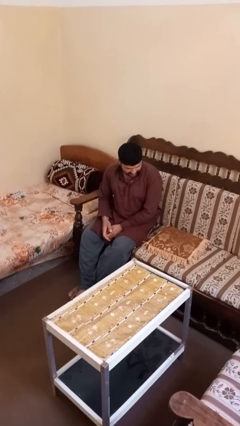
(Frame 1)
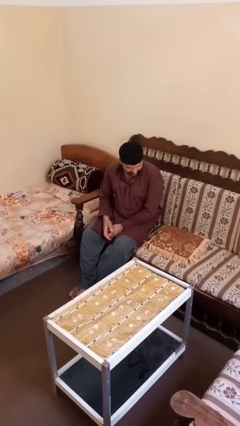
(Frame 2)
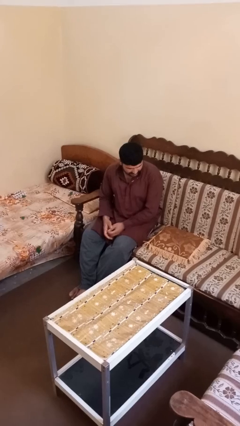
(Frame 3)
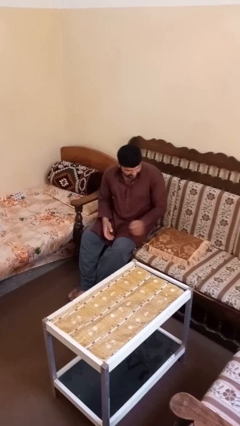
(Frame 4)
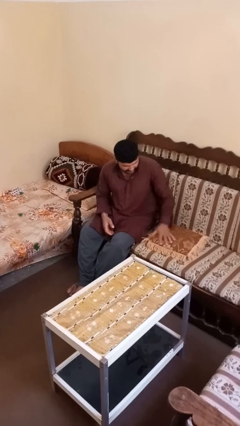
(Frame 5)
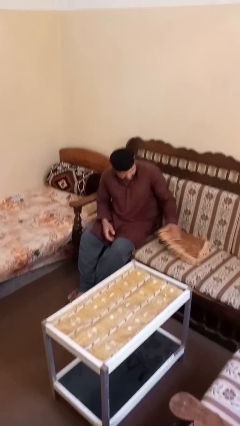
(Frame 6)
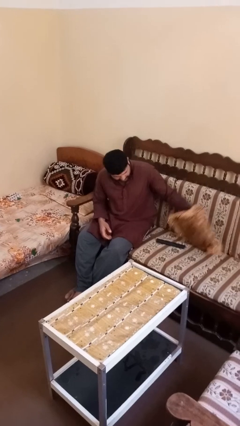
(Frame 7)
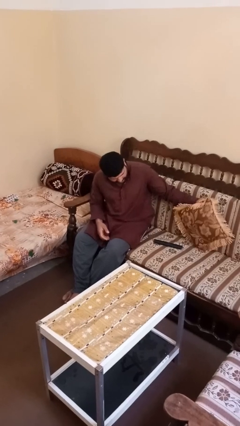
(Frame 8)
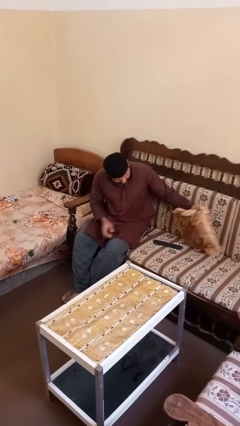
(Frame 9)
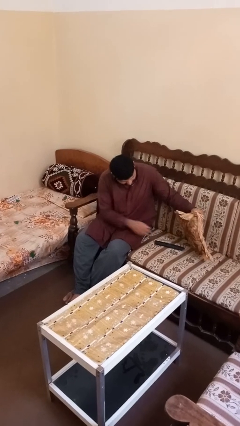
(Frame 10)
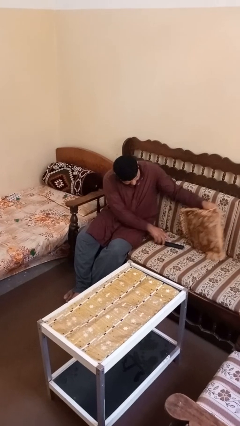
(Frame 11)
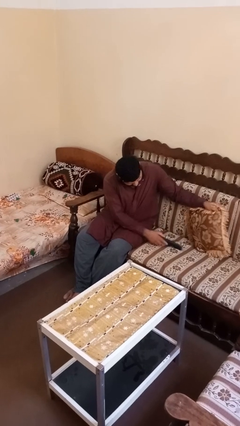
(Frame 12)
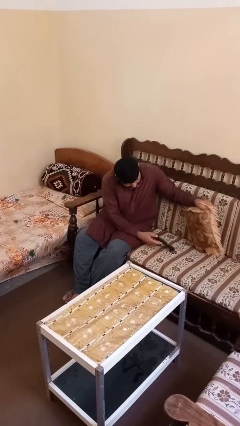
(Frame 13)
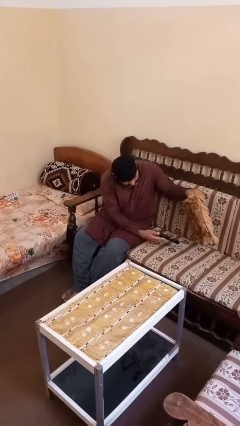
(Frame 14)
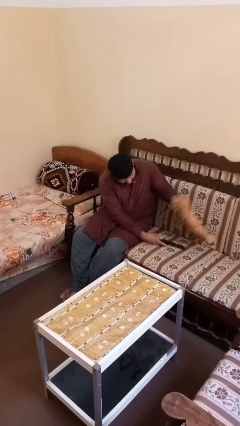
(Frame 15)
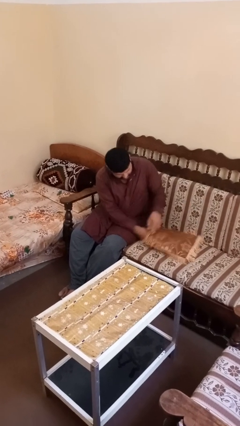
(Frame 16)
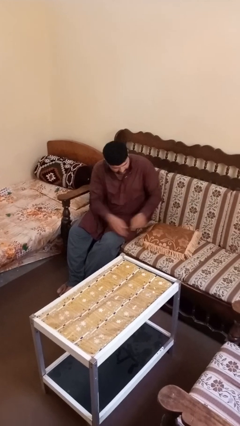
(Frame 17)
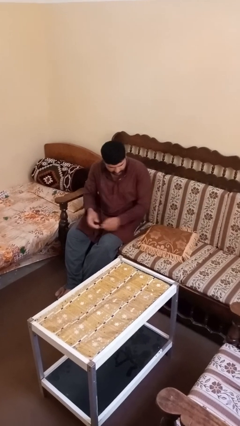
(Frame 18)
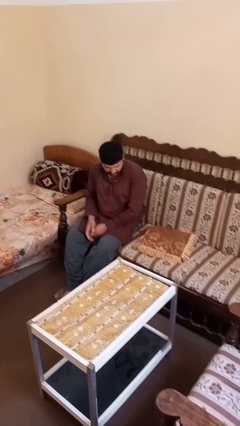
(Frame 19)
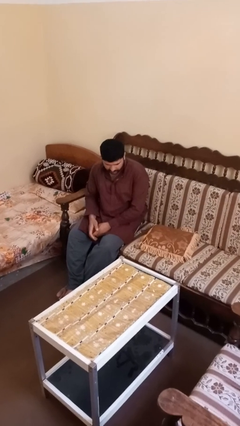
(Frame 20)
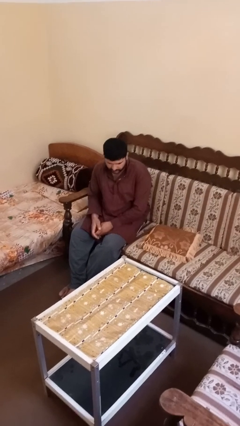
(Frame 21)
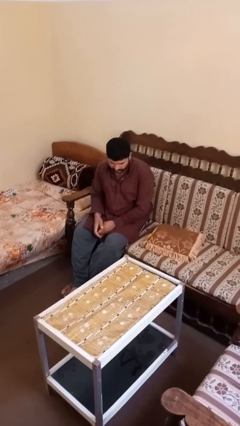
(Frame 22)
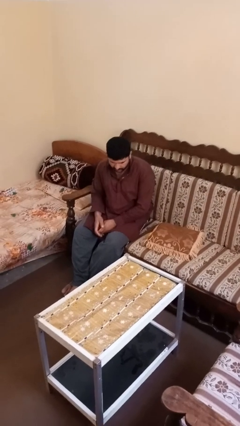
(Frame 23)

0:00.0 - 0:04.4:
person searches in couch

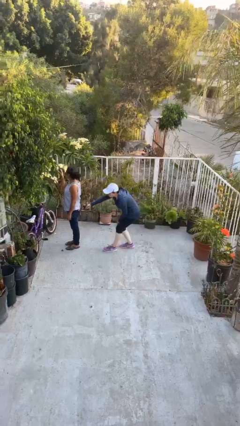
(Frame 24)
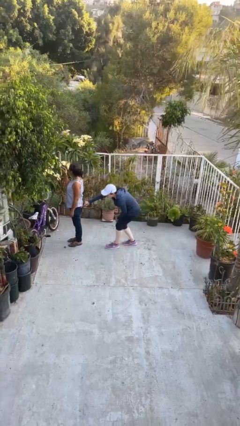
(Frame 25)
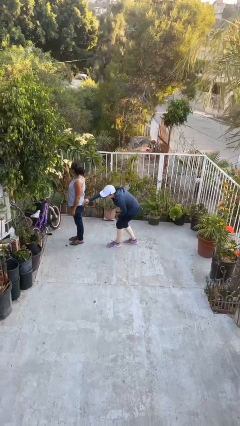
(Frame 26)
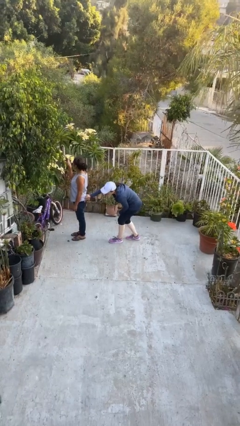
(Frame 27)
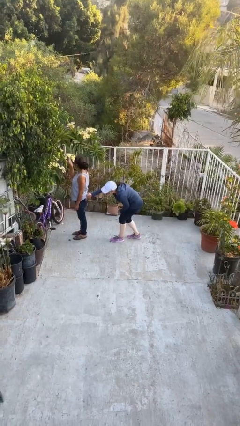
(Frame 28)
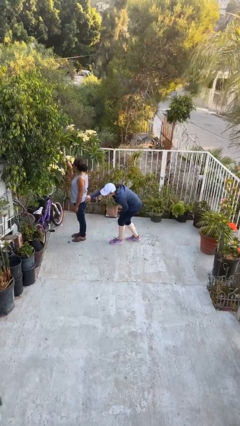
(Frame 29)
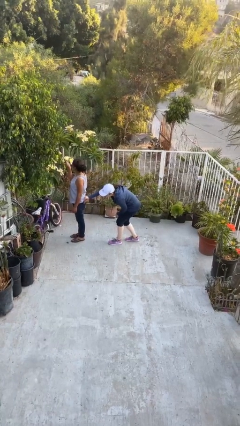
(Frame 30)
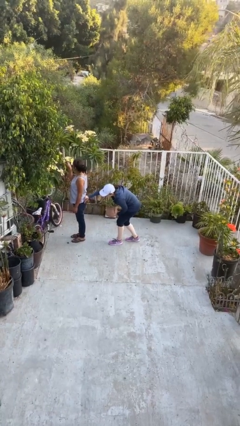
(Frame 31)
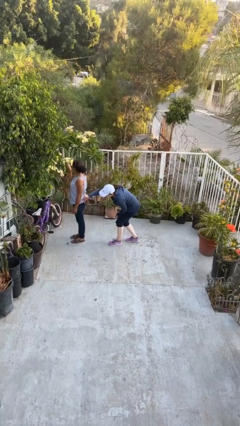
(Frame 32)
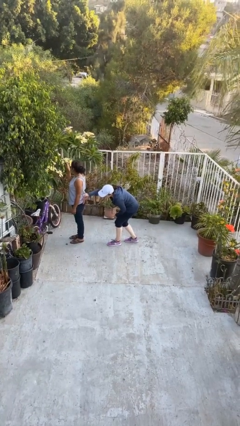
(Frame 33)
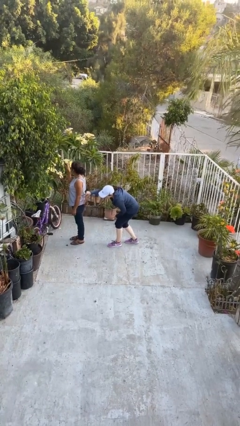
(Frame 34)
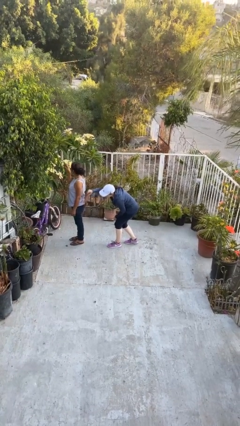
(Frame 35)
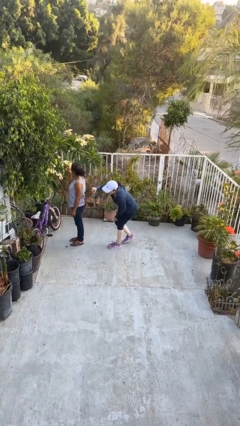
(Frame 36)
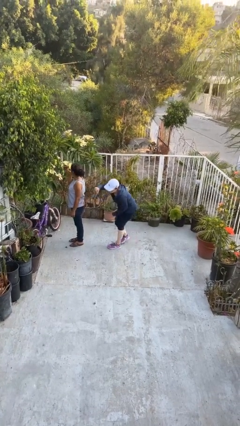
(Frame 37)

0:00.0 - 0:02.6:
person steals object from person

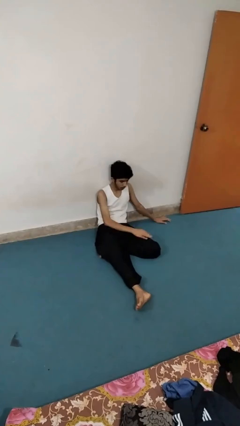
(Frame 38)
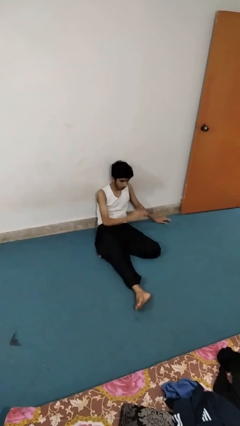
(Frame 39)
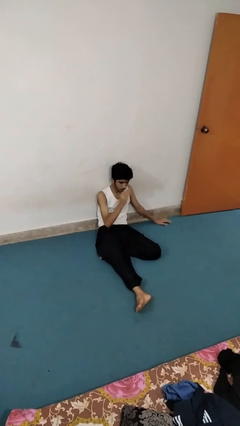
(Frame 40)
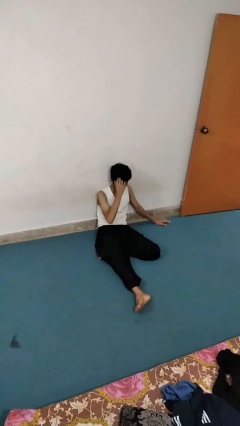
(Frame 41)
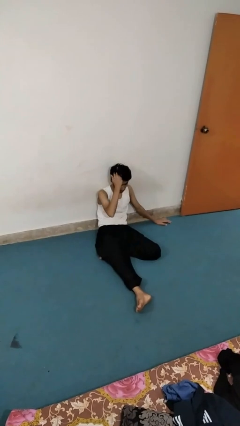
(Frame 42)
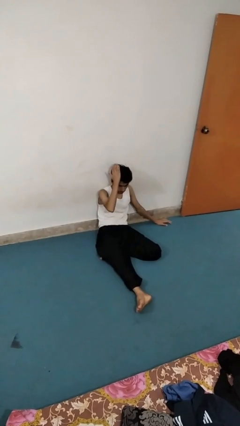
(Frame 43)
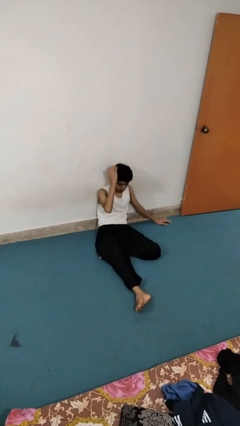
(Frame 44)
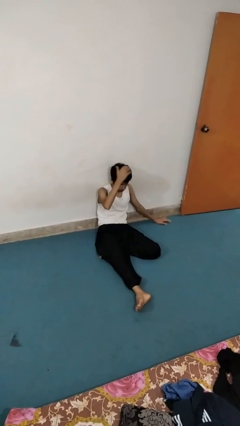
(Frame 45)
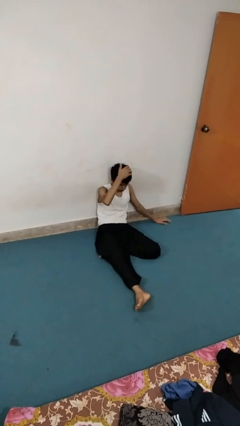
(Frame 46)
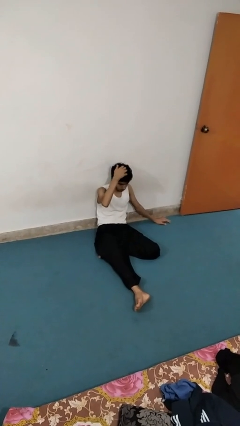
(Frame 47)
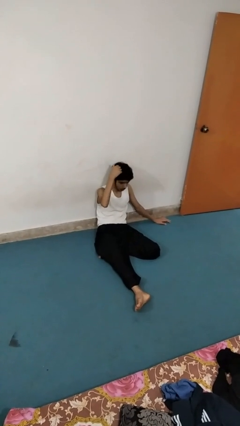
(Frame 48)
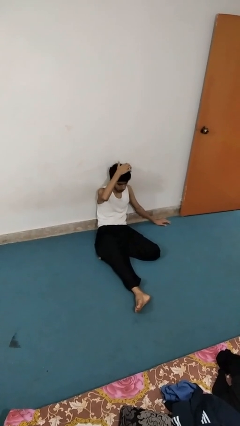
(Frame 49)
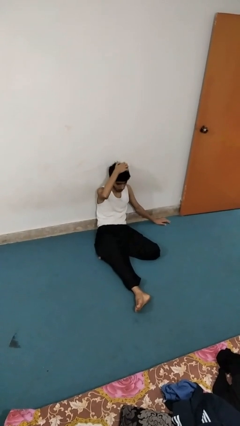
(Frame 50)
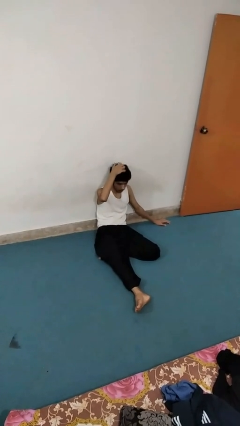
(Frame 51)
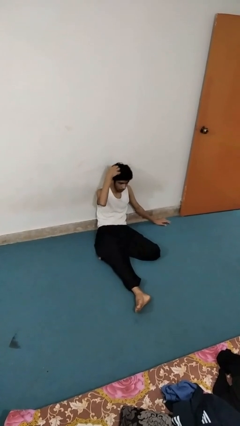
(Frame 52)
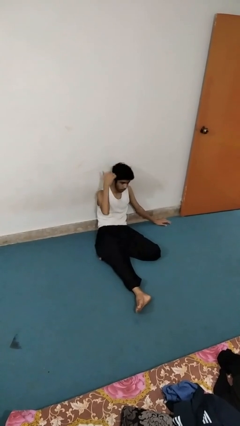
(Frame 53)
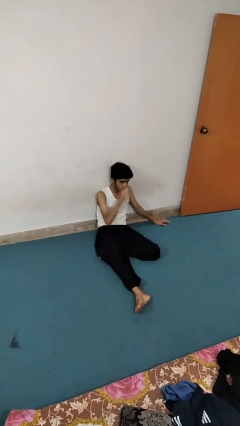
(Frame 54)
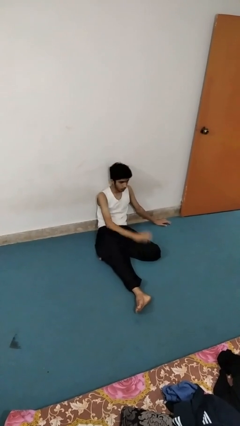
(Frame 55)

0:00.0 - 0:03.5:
person strokes hair

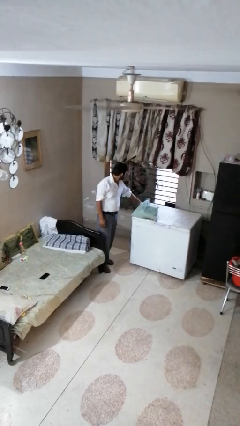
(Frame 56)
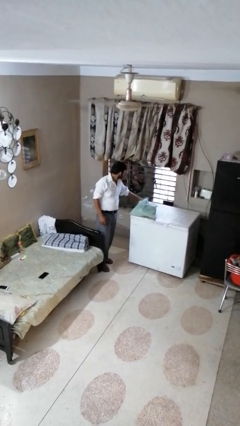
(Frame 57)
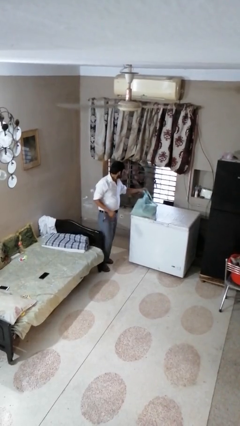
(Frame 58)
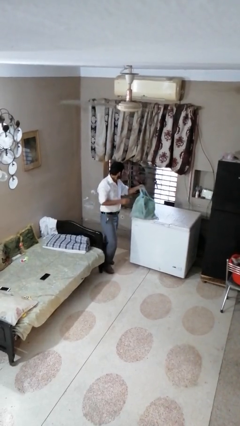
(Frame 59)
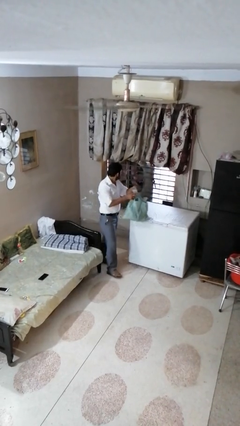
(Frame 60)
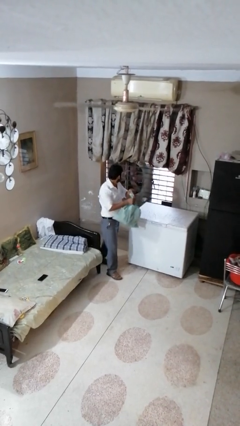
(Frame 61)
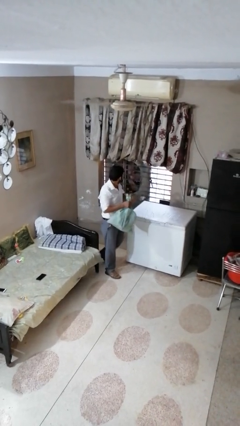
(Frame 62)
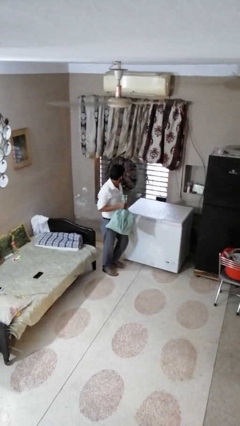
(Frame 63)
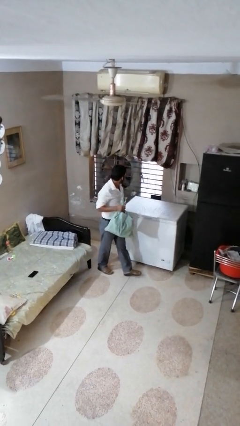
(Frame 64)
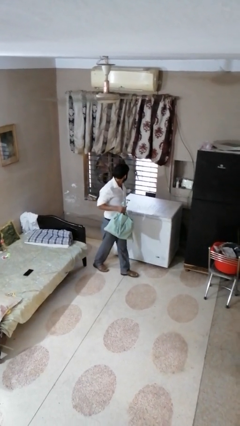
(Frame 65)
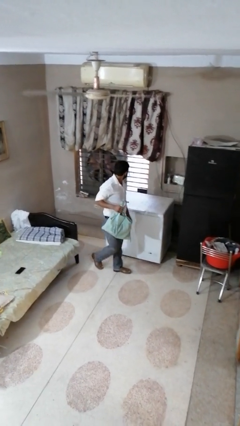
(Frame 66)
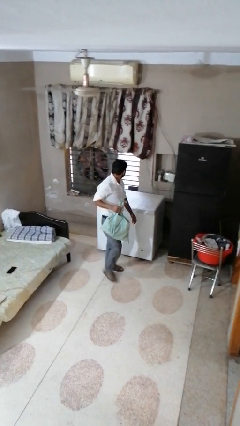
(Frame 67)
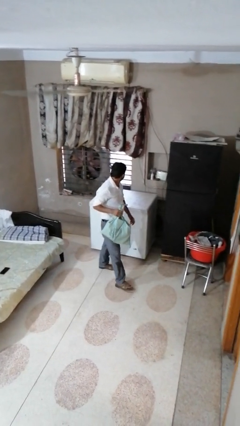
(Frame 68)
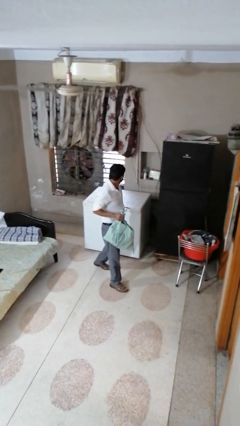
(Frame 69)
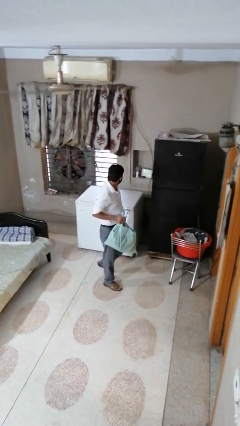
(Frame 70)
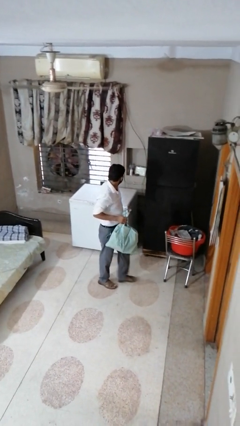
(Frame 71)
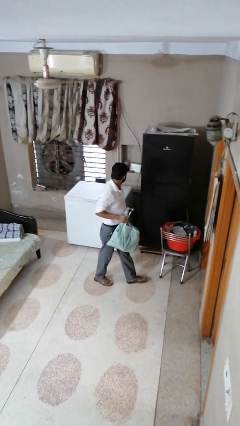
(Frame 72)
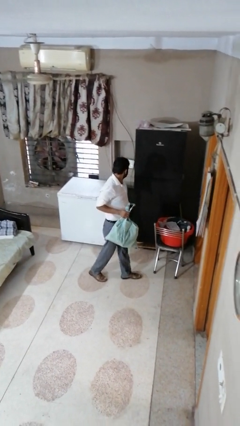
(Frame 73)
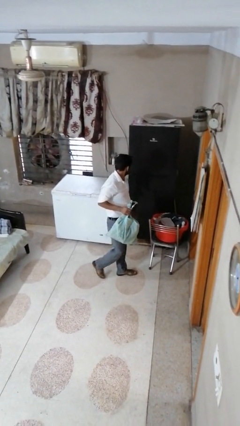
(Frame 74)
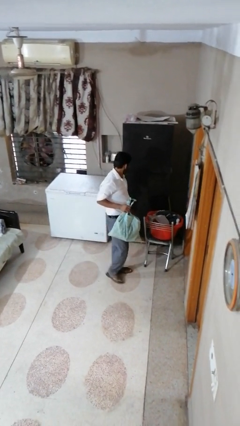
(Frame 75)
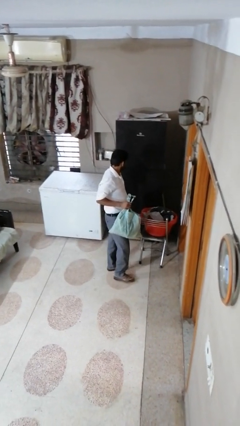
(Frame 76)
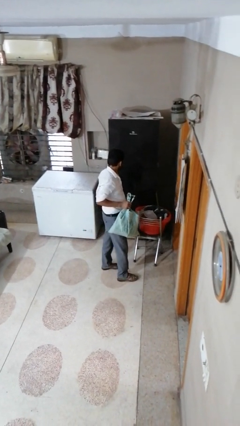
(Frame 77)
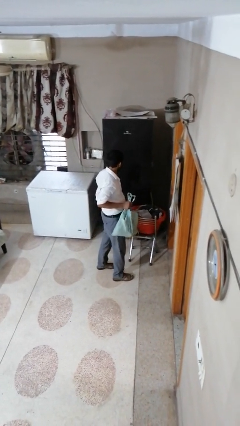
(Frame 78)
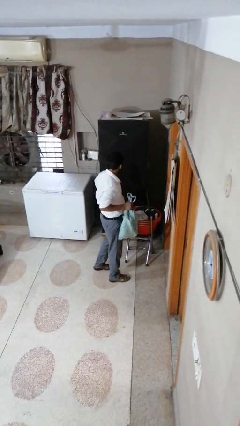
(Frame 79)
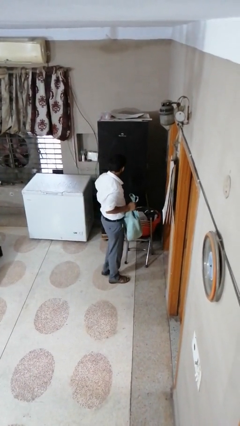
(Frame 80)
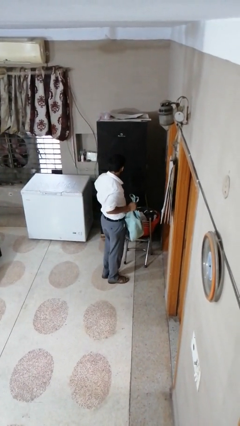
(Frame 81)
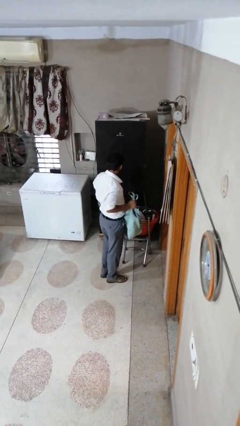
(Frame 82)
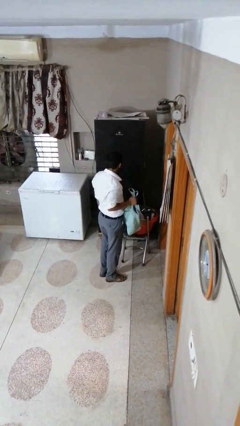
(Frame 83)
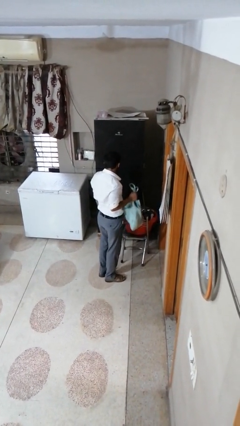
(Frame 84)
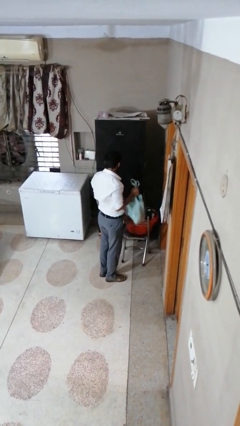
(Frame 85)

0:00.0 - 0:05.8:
person carries groceries

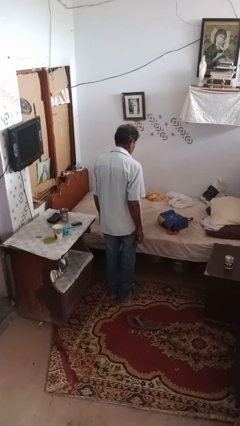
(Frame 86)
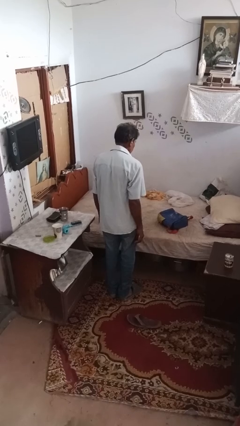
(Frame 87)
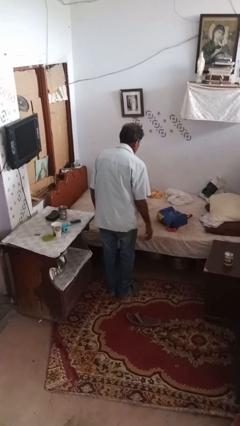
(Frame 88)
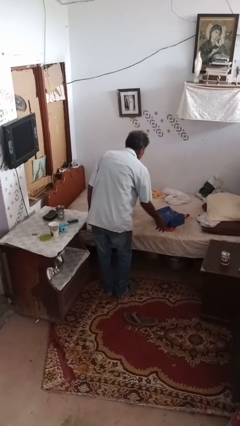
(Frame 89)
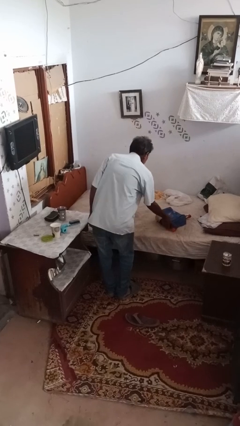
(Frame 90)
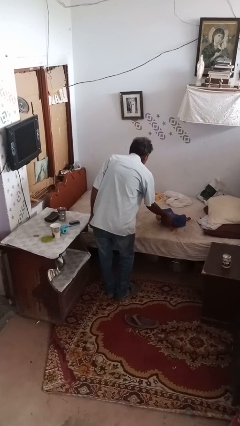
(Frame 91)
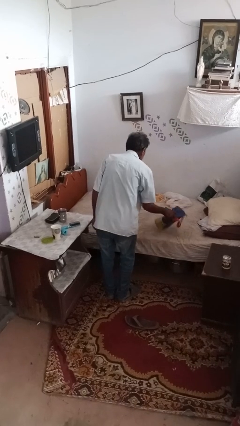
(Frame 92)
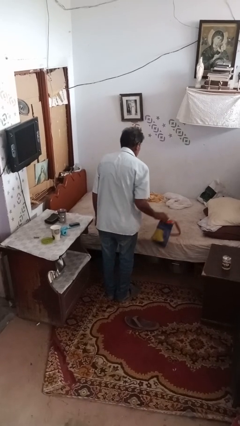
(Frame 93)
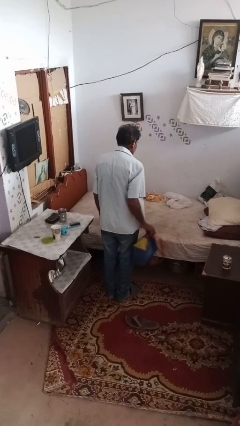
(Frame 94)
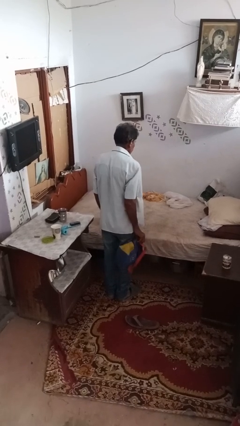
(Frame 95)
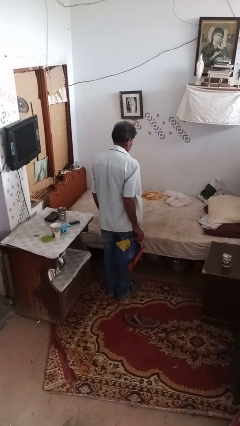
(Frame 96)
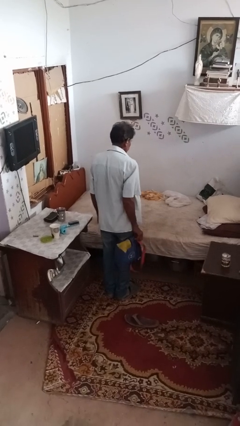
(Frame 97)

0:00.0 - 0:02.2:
person picks up object from bed
